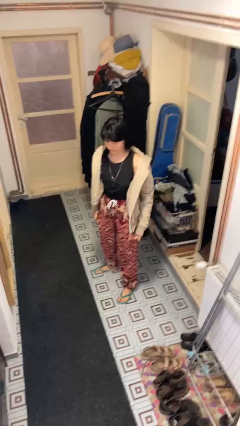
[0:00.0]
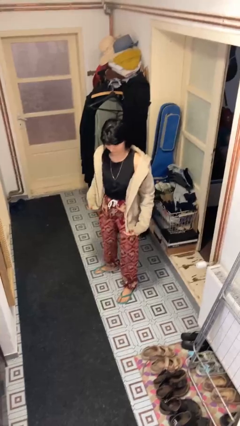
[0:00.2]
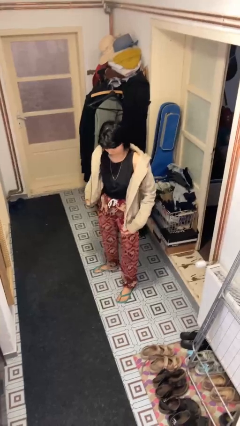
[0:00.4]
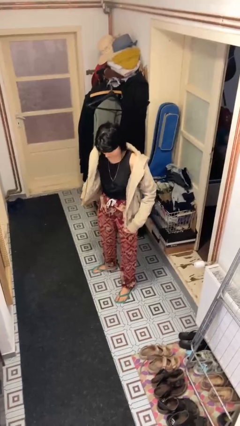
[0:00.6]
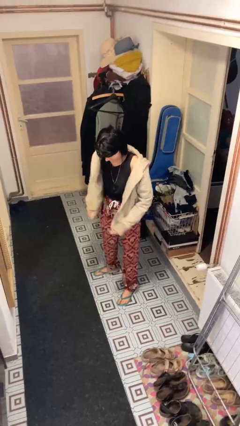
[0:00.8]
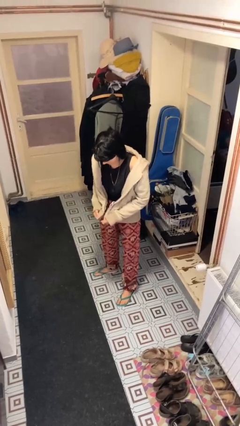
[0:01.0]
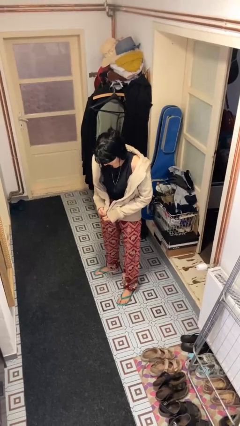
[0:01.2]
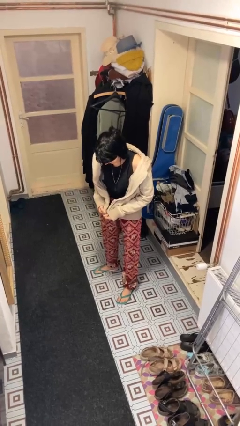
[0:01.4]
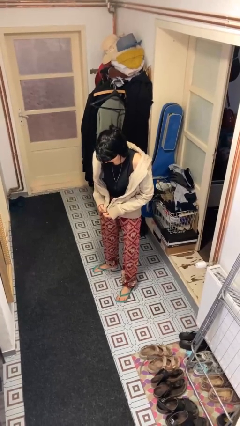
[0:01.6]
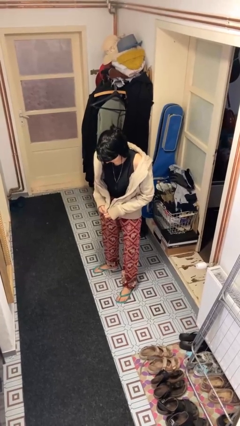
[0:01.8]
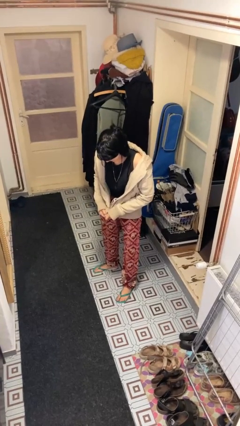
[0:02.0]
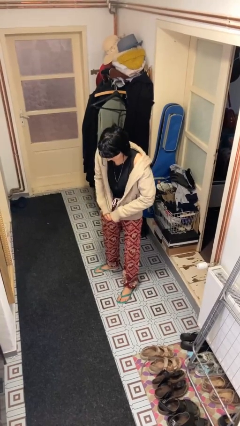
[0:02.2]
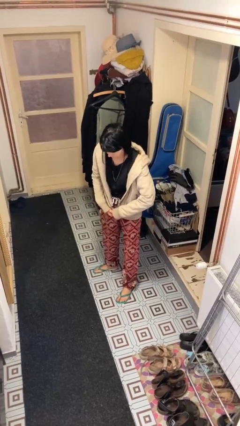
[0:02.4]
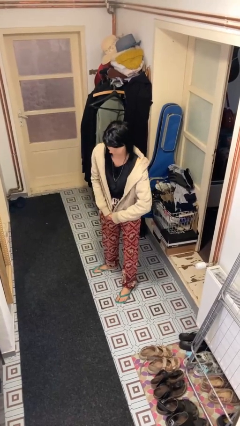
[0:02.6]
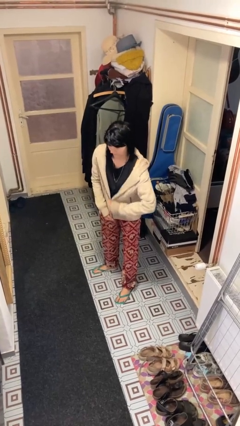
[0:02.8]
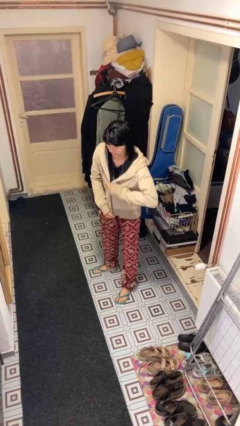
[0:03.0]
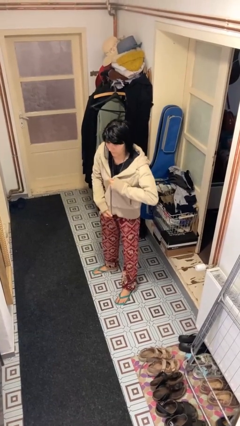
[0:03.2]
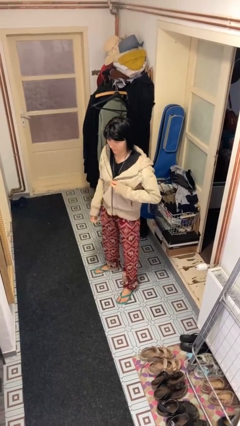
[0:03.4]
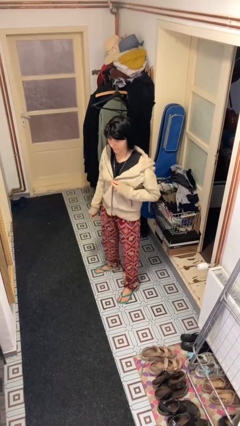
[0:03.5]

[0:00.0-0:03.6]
person zips up jacket

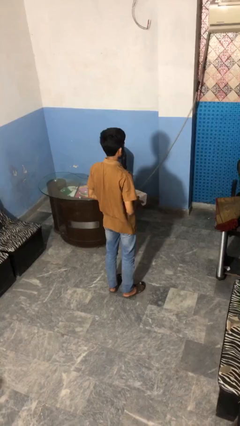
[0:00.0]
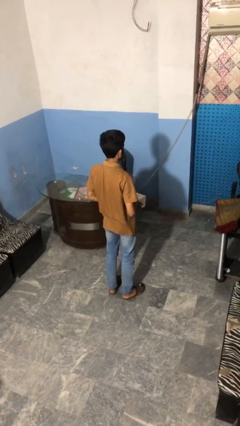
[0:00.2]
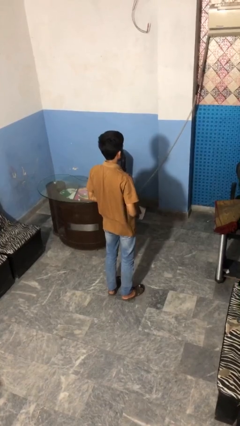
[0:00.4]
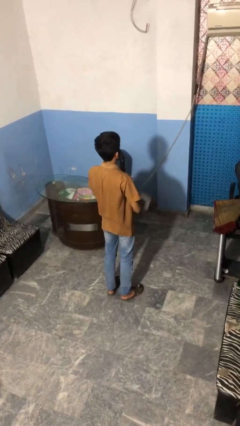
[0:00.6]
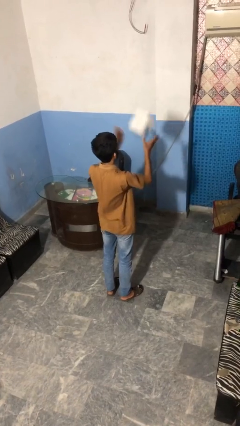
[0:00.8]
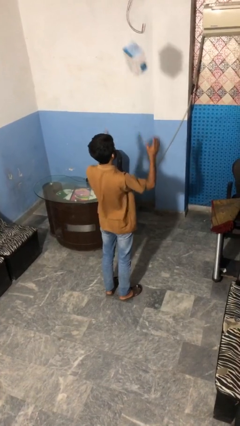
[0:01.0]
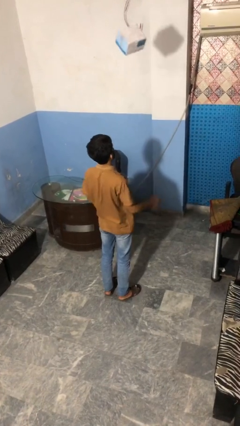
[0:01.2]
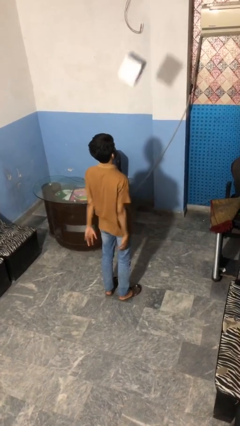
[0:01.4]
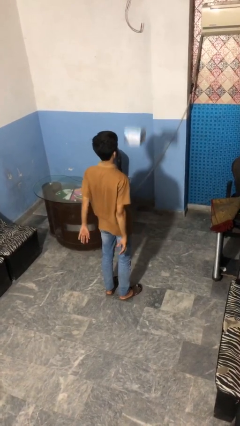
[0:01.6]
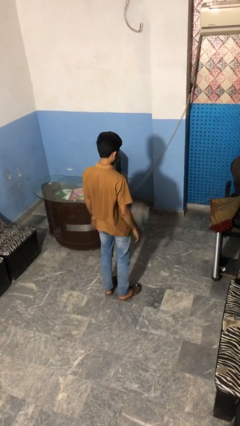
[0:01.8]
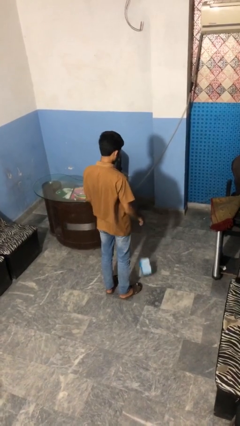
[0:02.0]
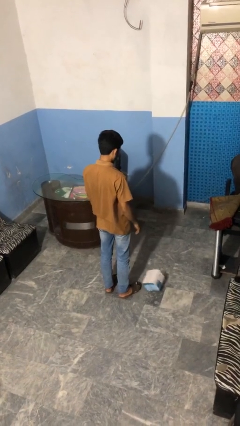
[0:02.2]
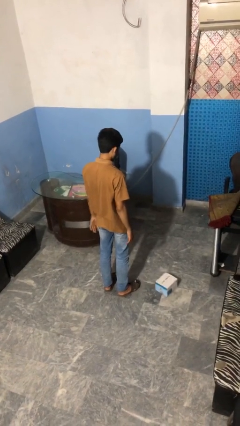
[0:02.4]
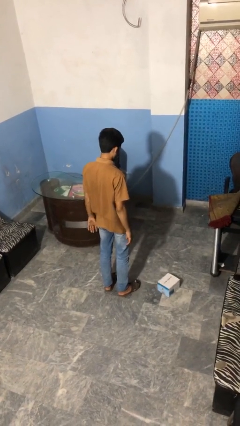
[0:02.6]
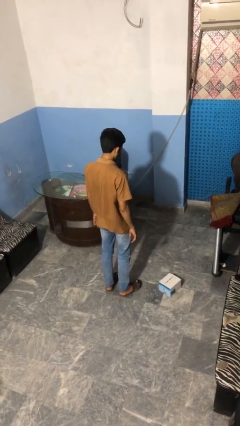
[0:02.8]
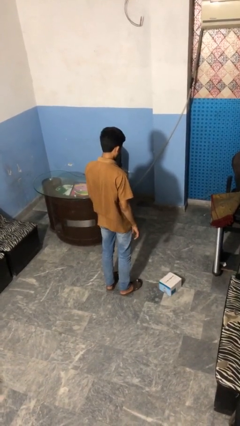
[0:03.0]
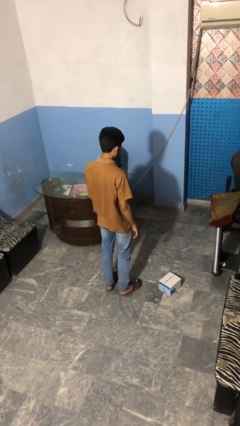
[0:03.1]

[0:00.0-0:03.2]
person throws object into air

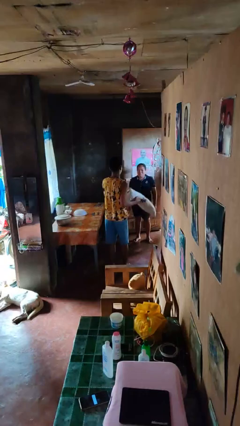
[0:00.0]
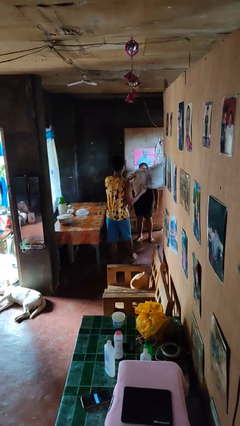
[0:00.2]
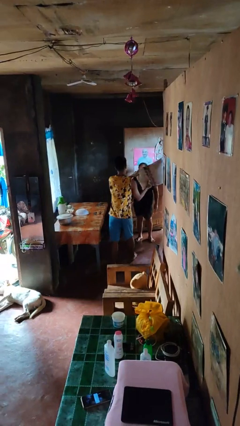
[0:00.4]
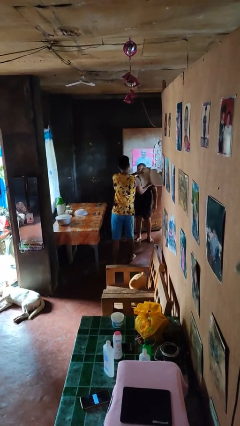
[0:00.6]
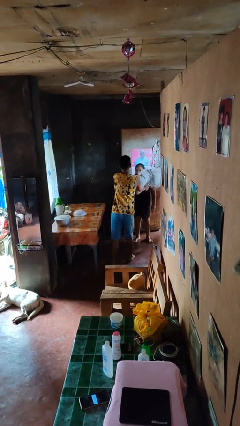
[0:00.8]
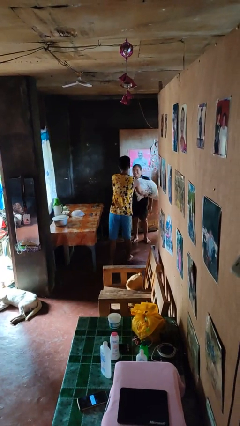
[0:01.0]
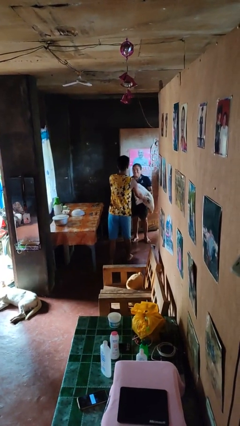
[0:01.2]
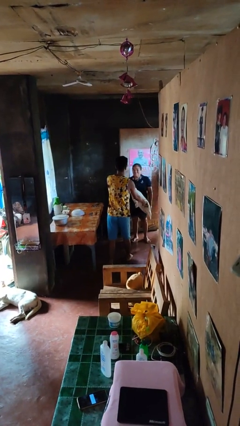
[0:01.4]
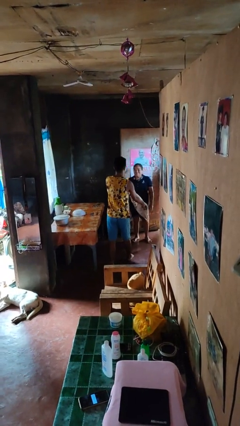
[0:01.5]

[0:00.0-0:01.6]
person hits person with pillow

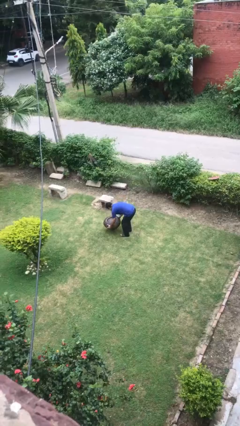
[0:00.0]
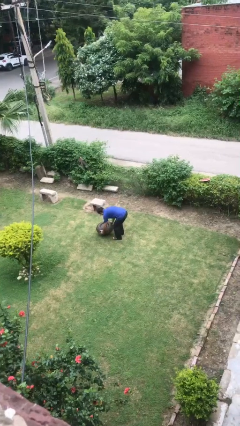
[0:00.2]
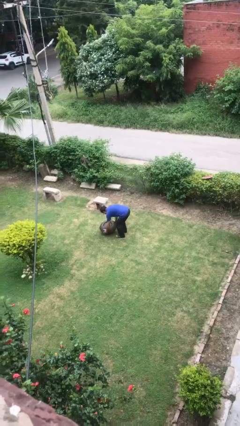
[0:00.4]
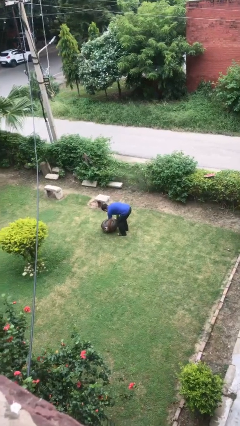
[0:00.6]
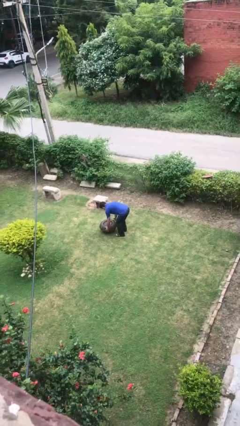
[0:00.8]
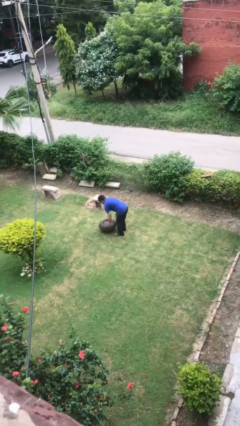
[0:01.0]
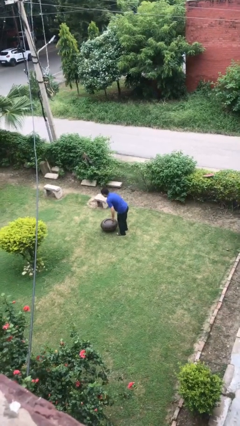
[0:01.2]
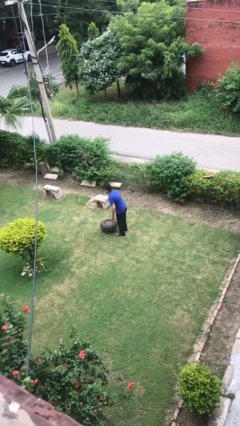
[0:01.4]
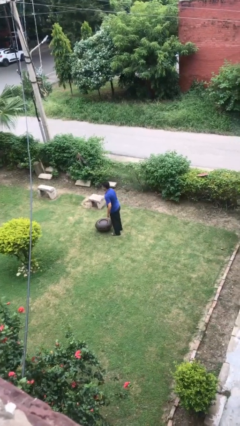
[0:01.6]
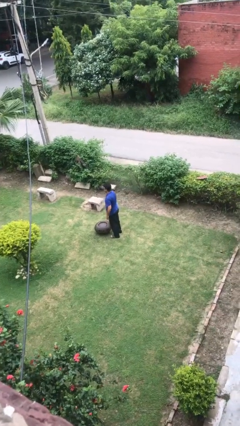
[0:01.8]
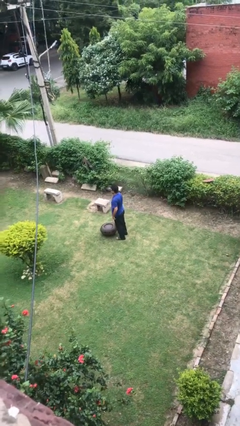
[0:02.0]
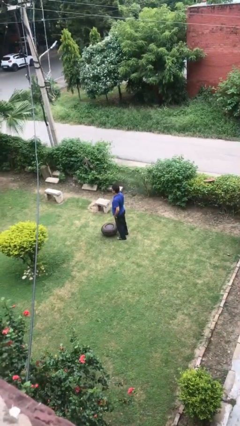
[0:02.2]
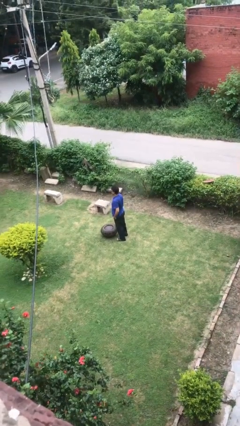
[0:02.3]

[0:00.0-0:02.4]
person puts down object on floor

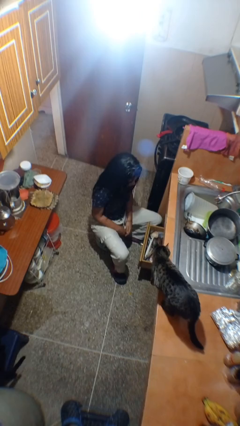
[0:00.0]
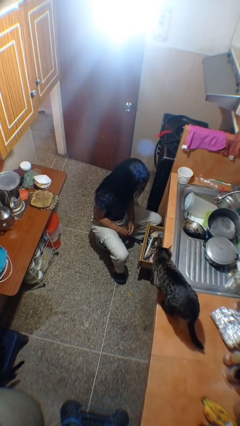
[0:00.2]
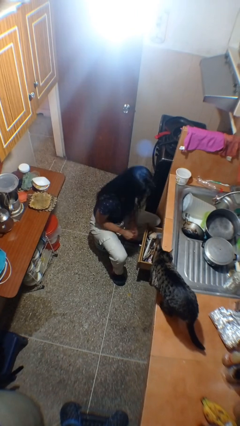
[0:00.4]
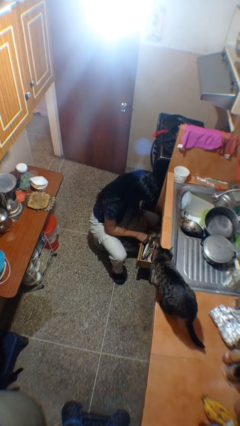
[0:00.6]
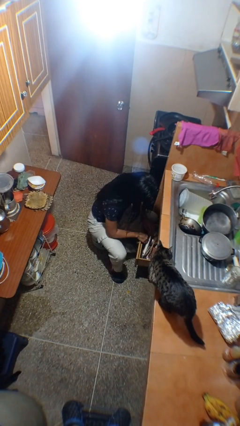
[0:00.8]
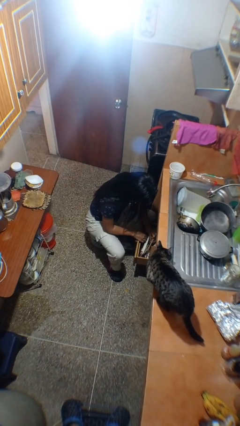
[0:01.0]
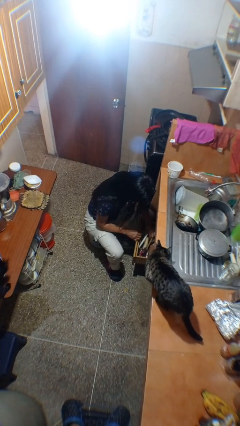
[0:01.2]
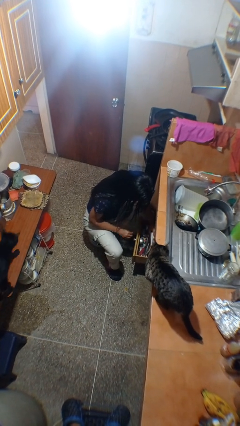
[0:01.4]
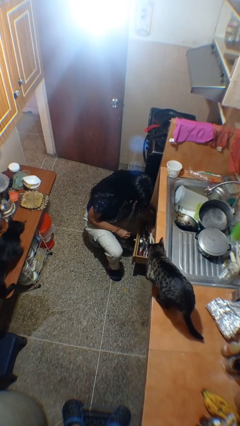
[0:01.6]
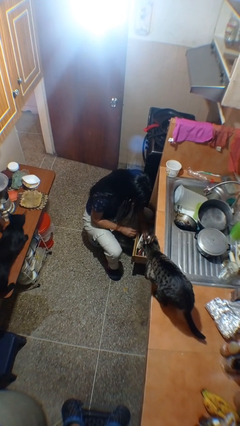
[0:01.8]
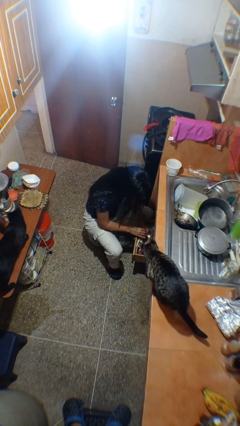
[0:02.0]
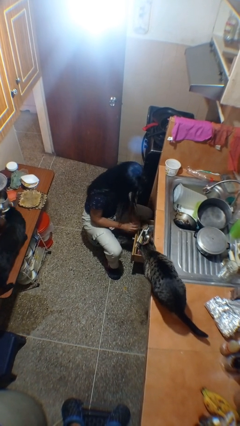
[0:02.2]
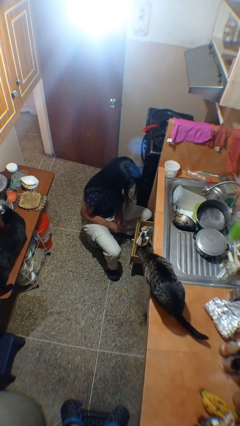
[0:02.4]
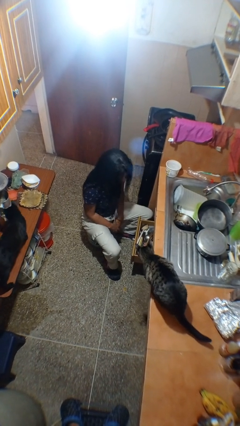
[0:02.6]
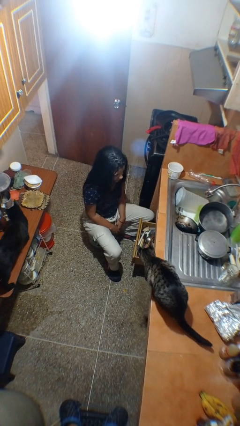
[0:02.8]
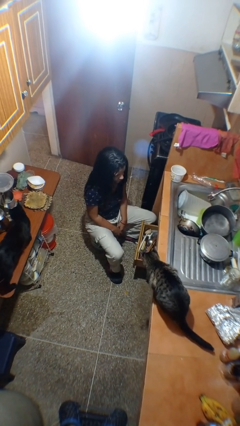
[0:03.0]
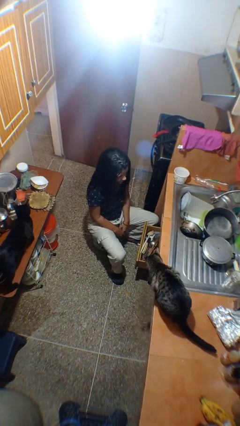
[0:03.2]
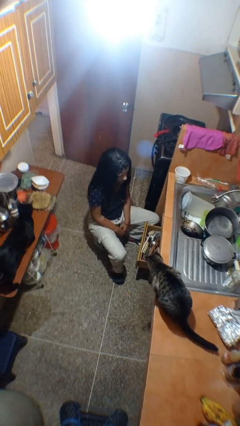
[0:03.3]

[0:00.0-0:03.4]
person searches in kitchen drawer

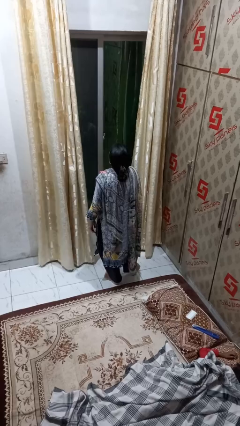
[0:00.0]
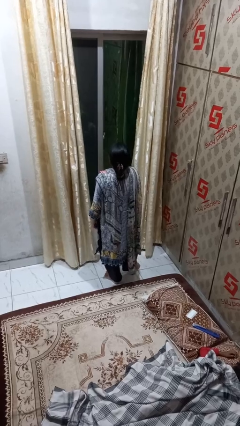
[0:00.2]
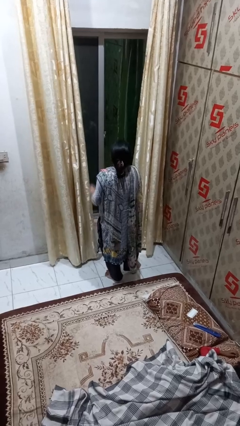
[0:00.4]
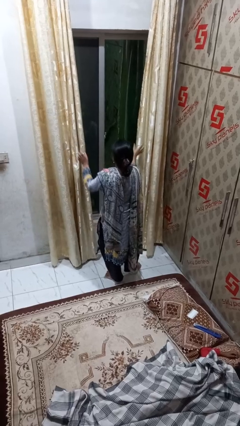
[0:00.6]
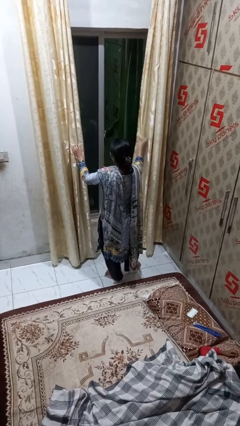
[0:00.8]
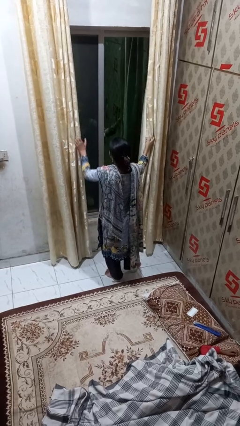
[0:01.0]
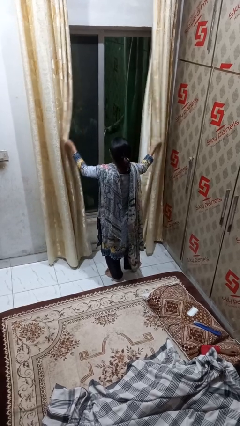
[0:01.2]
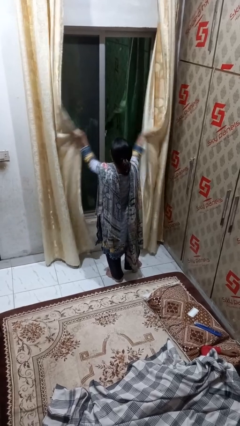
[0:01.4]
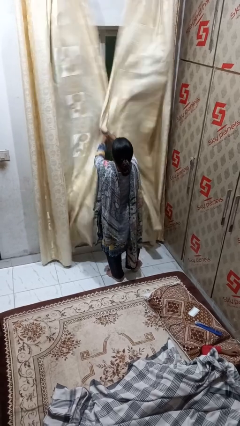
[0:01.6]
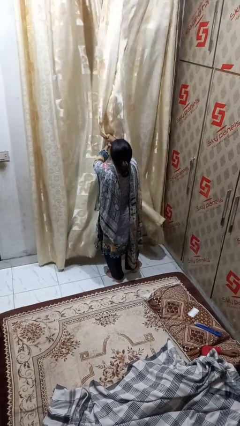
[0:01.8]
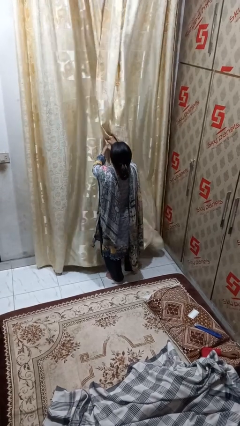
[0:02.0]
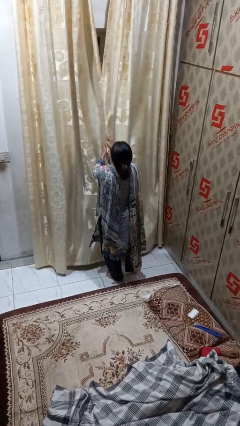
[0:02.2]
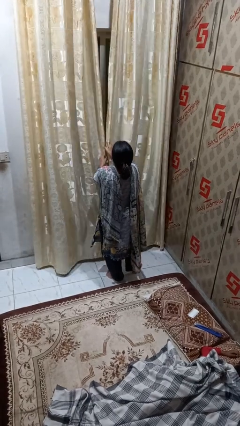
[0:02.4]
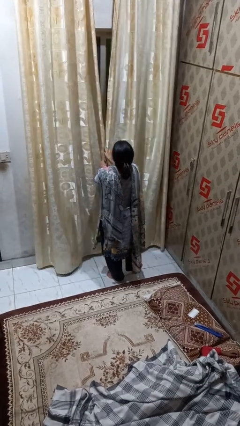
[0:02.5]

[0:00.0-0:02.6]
person closes curtains

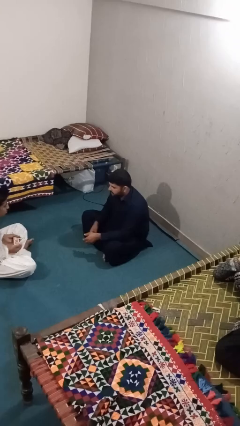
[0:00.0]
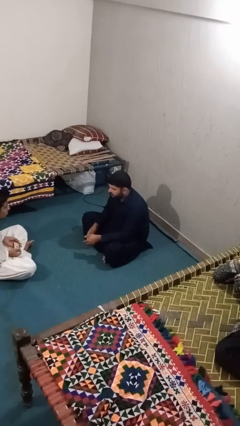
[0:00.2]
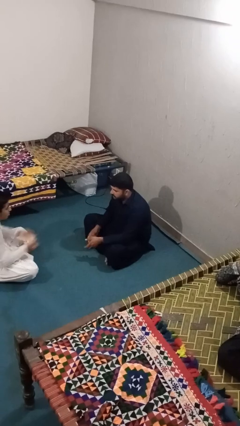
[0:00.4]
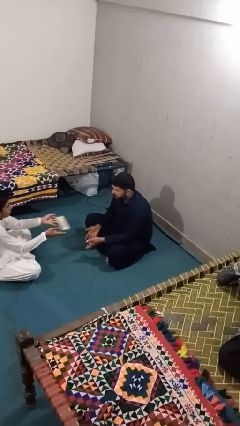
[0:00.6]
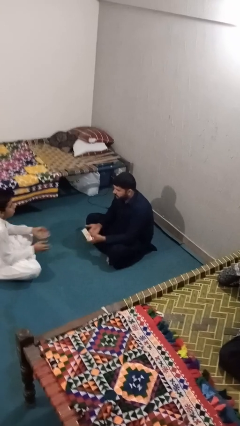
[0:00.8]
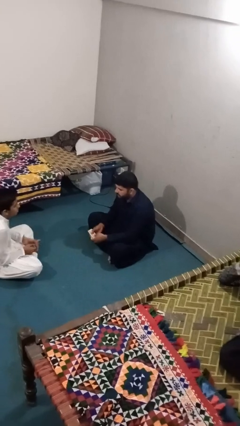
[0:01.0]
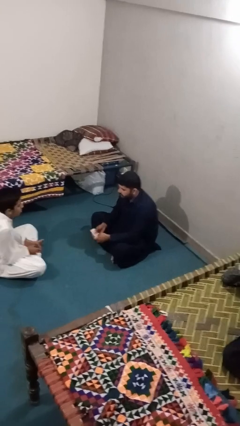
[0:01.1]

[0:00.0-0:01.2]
person catches object from person
